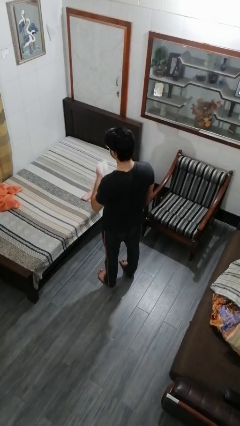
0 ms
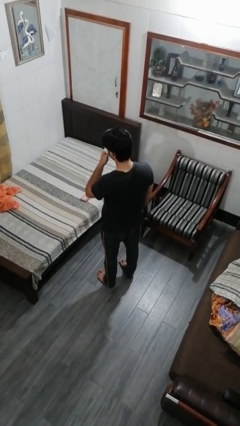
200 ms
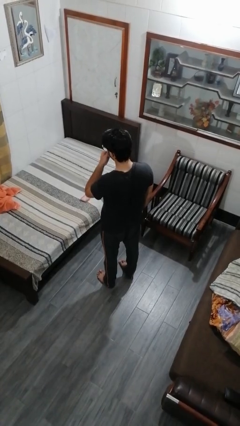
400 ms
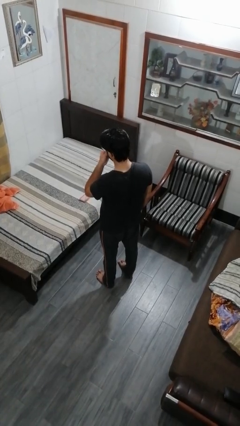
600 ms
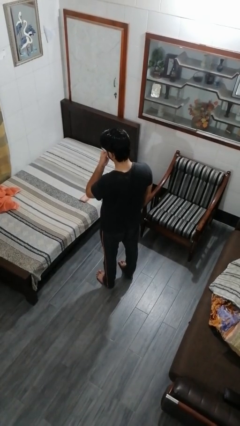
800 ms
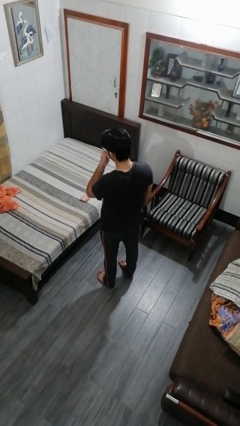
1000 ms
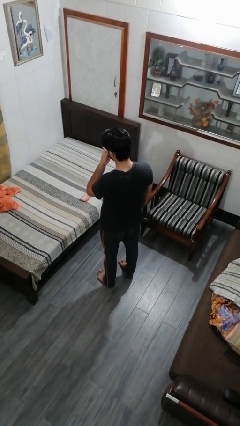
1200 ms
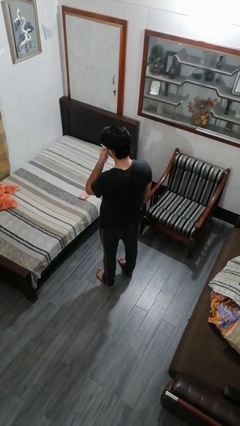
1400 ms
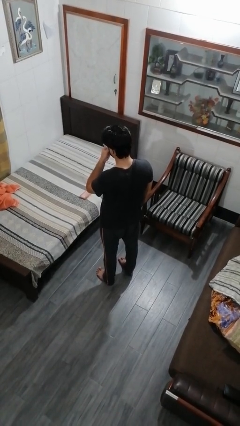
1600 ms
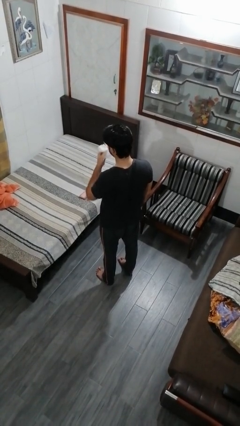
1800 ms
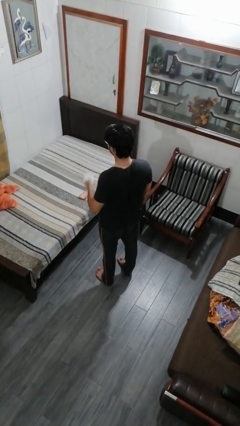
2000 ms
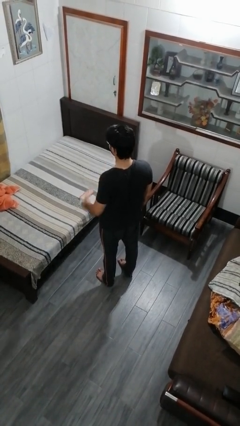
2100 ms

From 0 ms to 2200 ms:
person blows nose

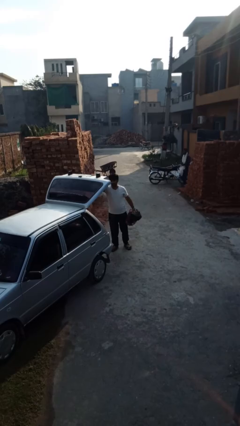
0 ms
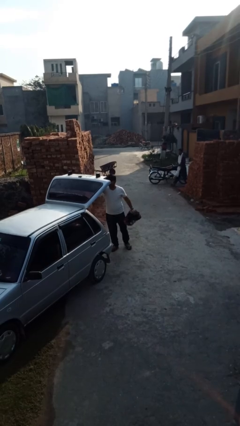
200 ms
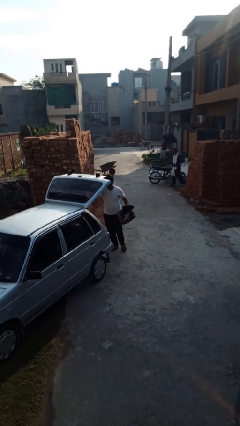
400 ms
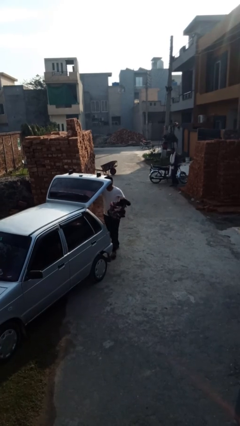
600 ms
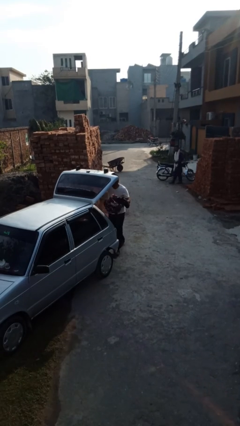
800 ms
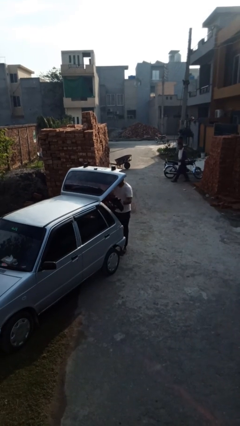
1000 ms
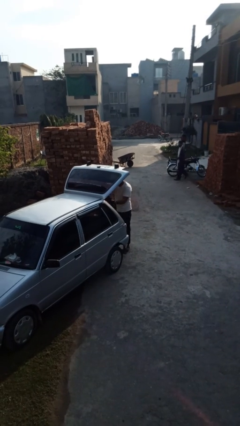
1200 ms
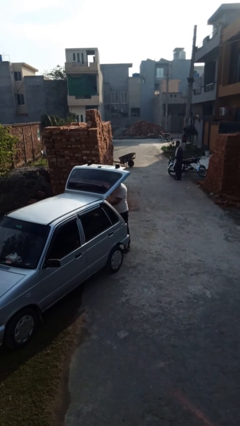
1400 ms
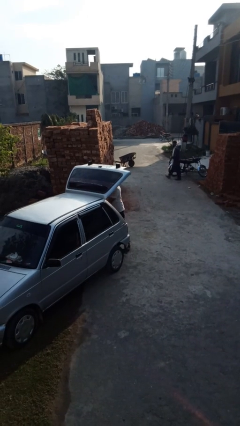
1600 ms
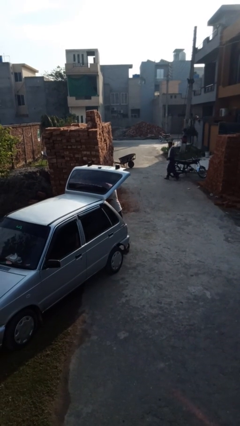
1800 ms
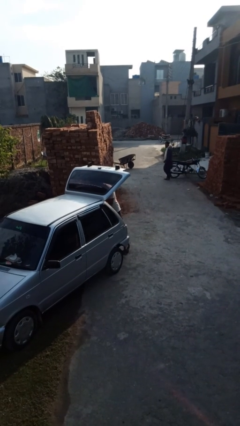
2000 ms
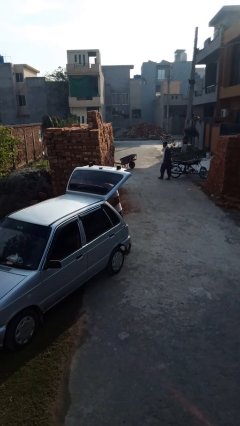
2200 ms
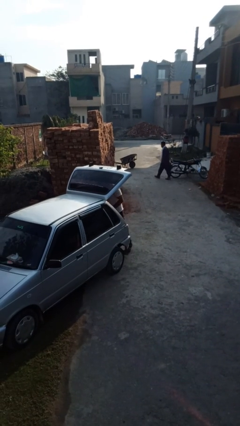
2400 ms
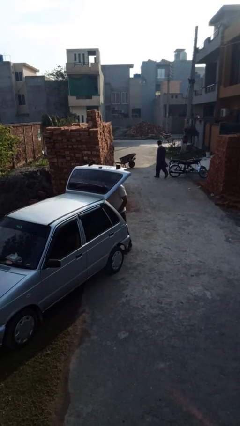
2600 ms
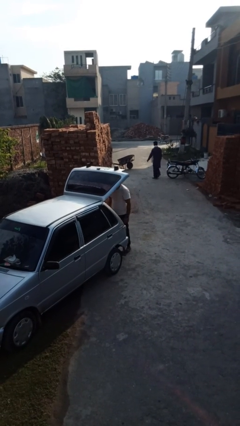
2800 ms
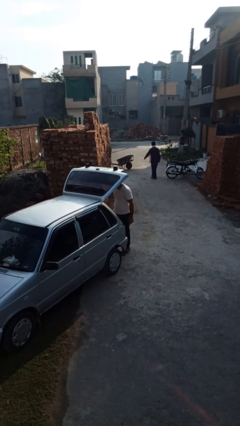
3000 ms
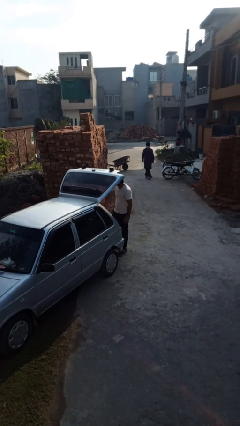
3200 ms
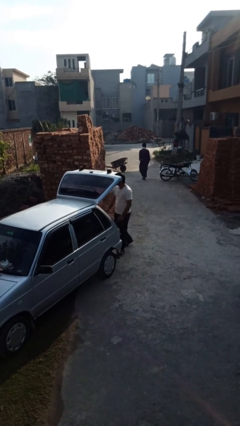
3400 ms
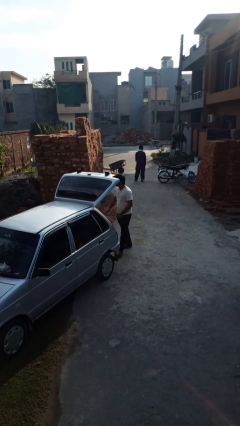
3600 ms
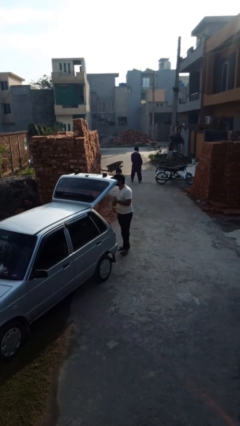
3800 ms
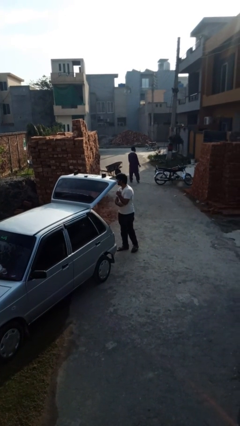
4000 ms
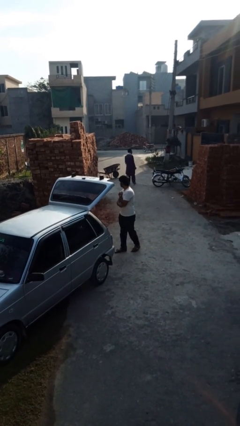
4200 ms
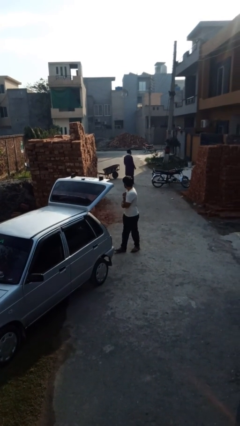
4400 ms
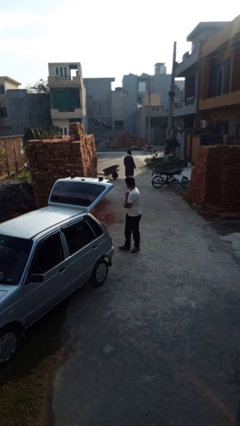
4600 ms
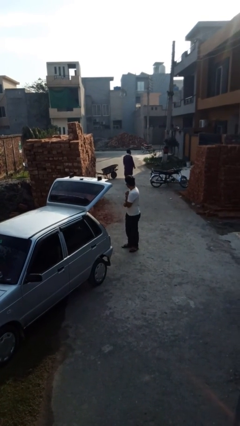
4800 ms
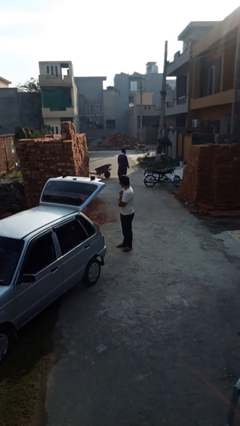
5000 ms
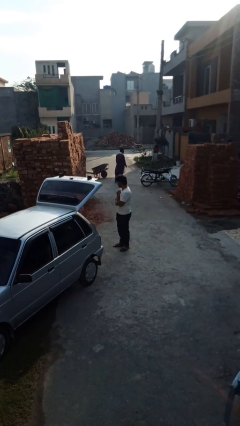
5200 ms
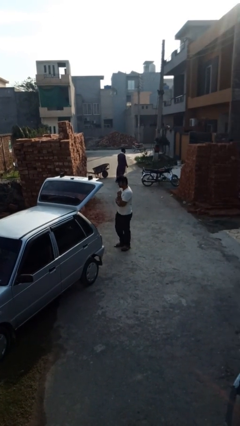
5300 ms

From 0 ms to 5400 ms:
person loads car

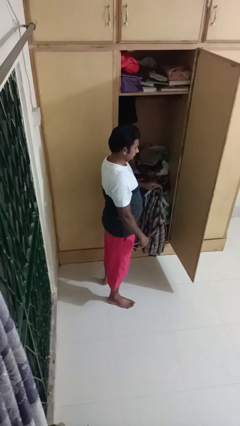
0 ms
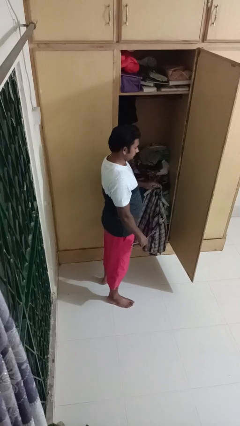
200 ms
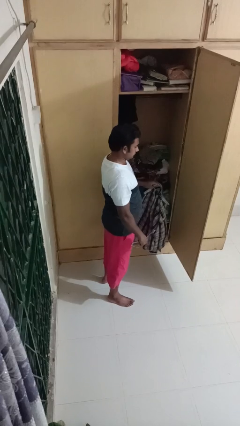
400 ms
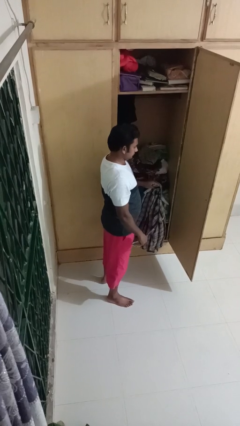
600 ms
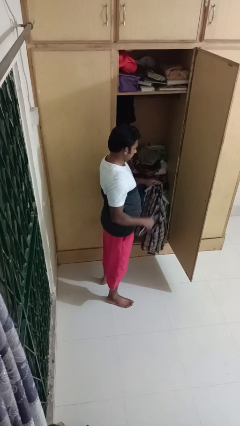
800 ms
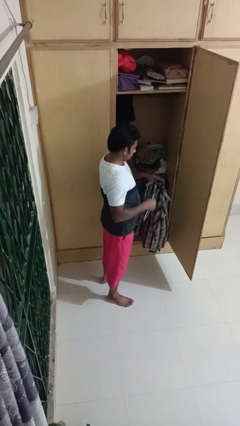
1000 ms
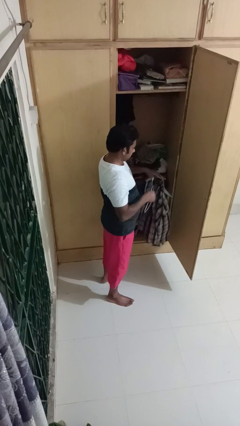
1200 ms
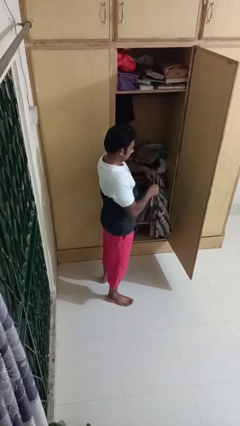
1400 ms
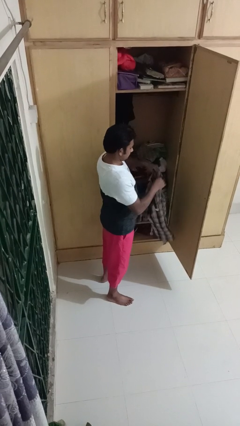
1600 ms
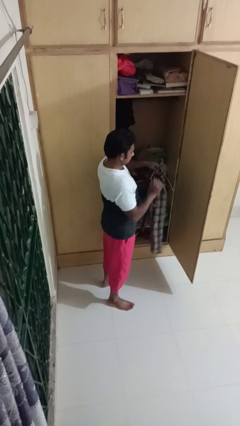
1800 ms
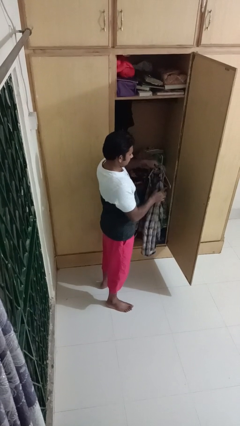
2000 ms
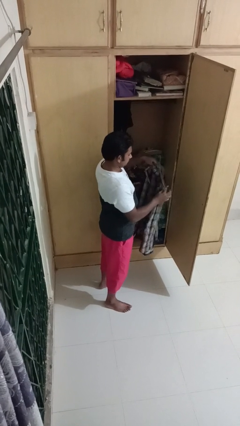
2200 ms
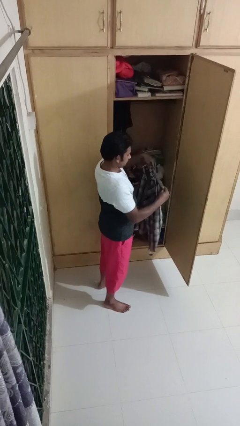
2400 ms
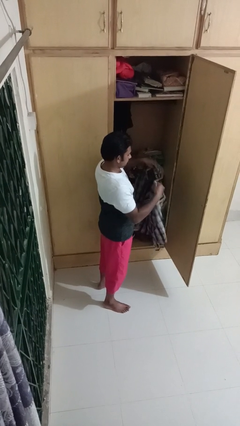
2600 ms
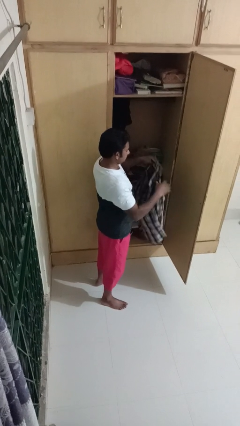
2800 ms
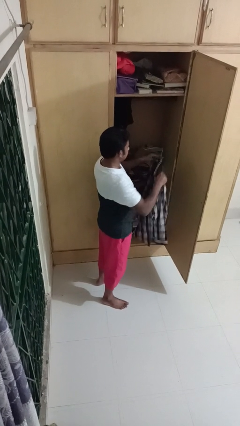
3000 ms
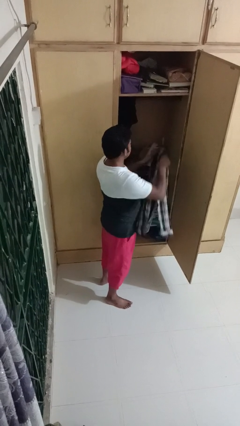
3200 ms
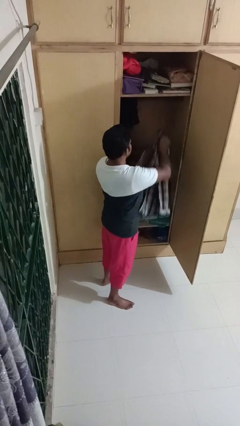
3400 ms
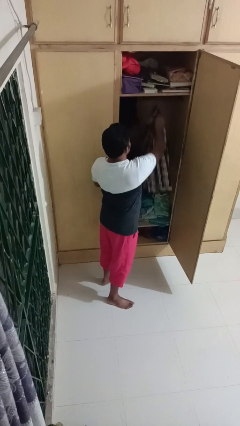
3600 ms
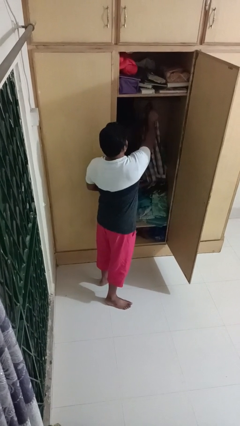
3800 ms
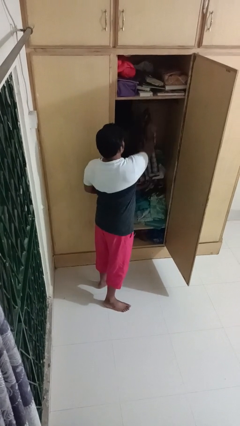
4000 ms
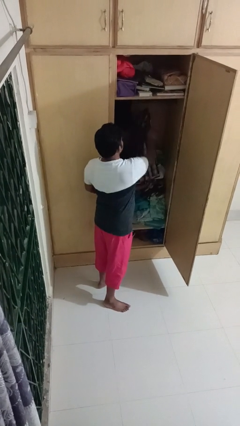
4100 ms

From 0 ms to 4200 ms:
person puts clothes into closet

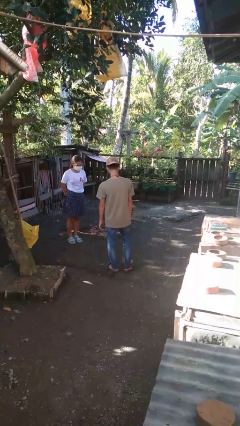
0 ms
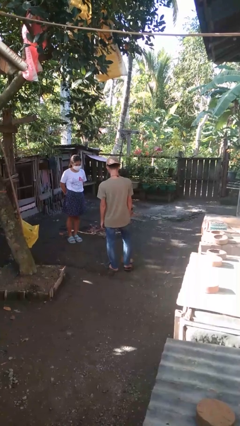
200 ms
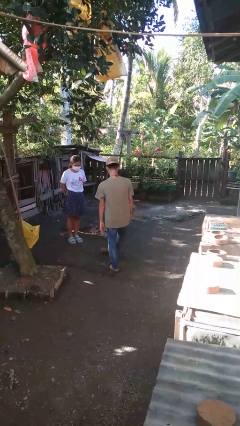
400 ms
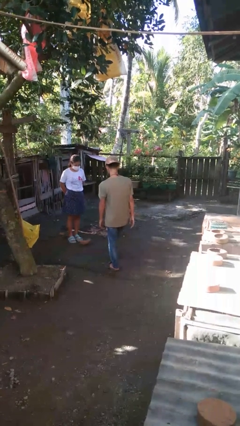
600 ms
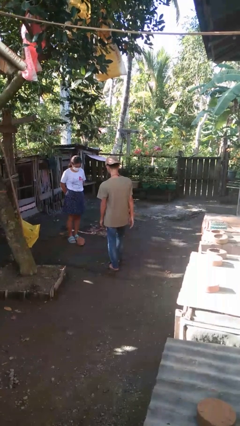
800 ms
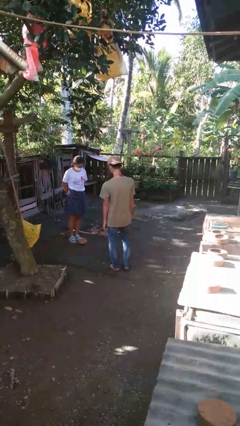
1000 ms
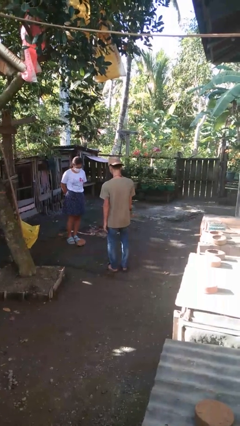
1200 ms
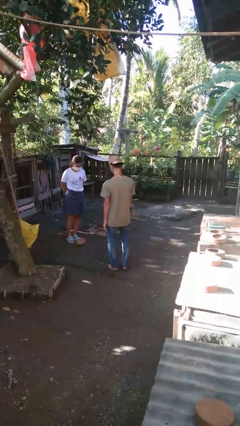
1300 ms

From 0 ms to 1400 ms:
person kicks object to person

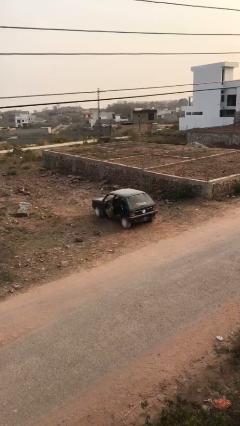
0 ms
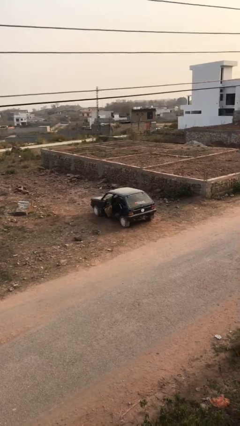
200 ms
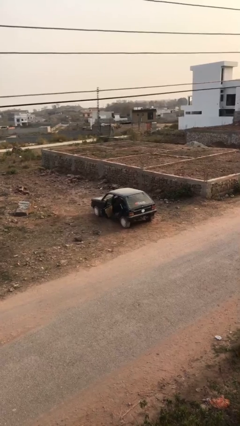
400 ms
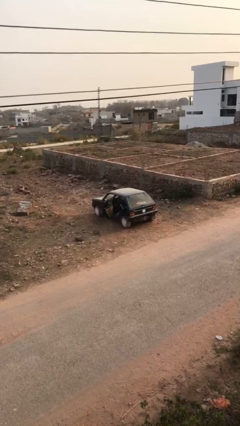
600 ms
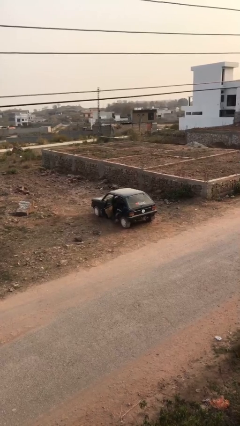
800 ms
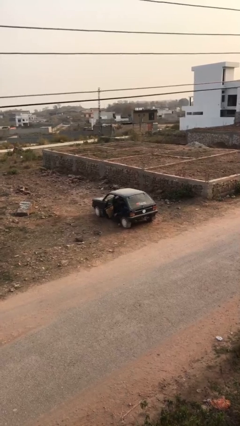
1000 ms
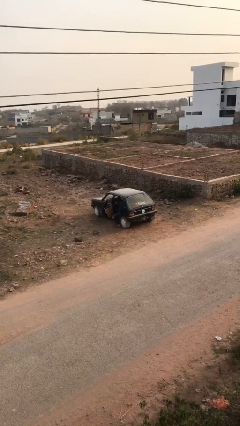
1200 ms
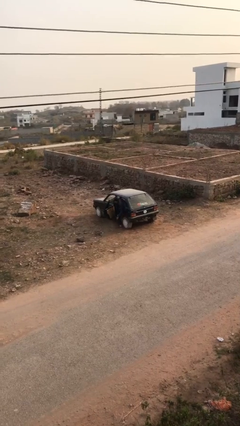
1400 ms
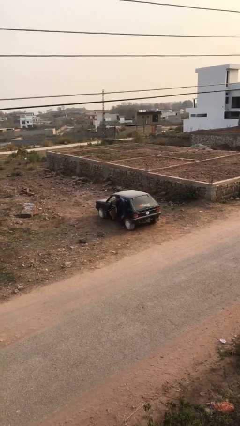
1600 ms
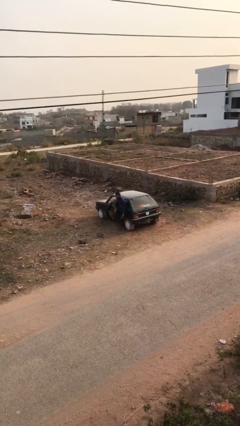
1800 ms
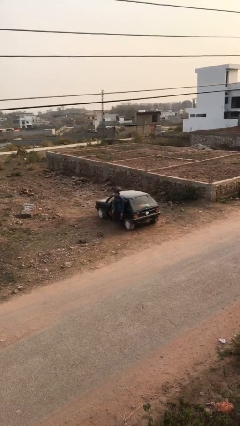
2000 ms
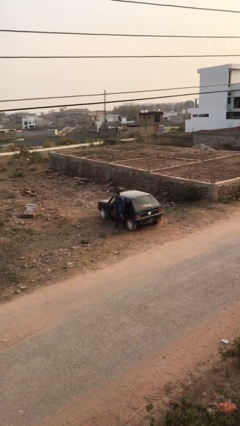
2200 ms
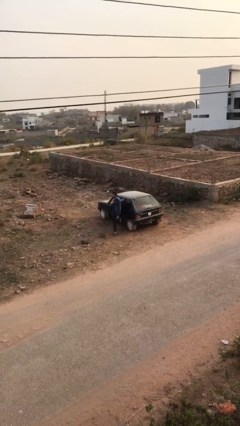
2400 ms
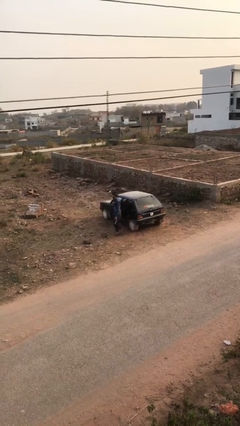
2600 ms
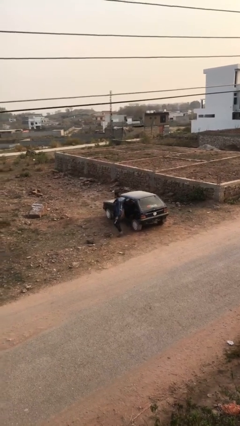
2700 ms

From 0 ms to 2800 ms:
person exits car

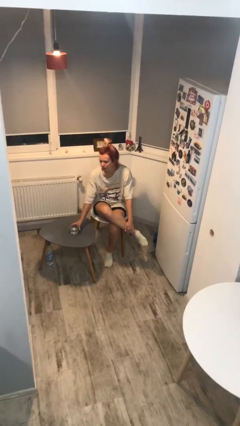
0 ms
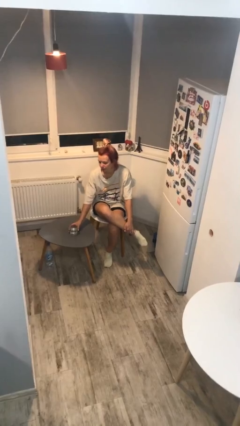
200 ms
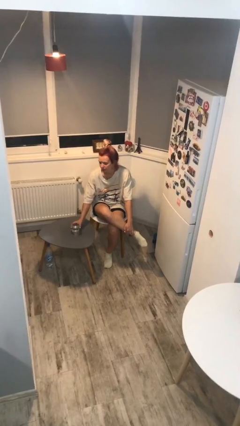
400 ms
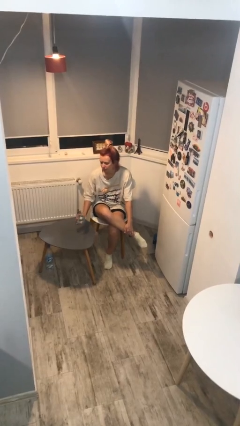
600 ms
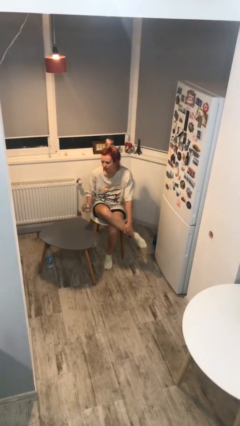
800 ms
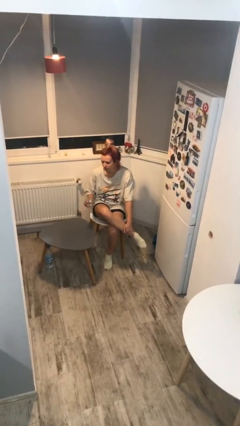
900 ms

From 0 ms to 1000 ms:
person picks up object from table

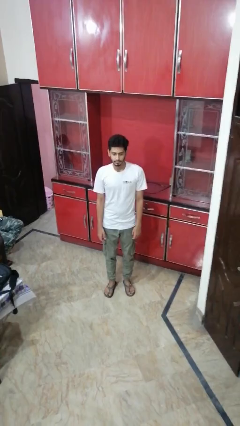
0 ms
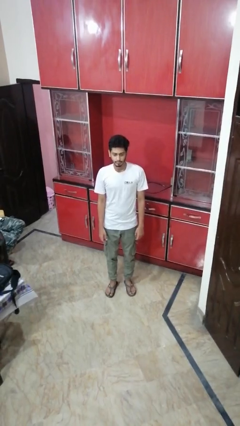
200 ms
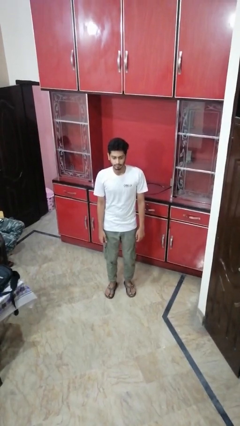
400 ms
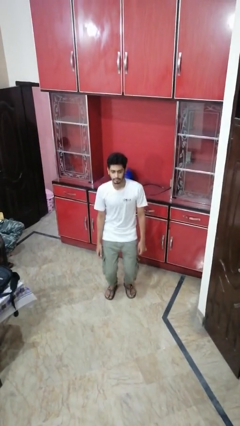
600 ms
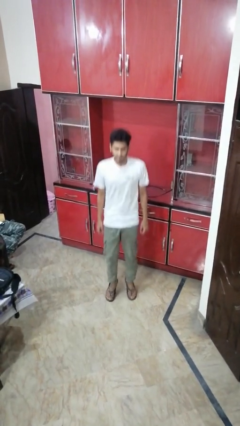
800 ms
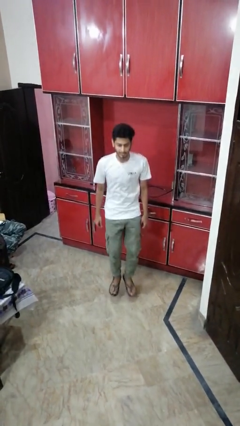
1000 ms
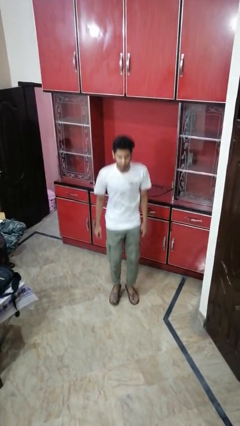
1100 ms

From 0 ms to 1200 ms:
person jumps
